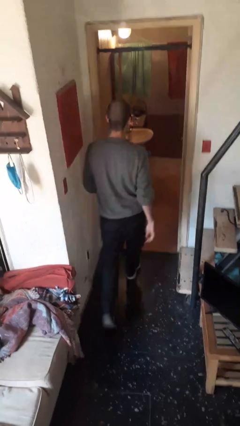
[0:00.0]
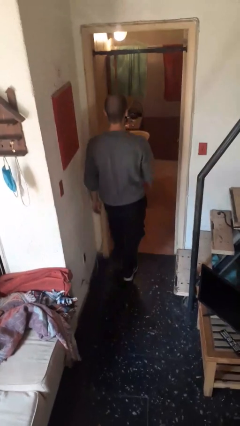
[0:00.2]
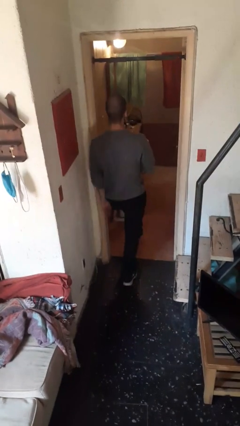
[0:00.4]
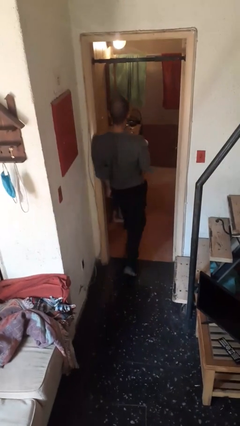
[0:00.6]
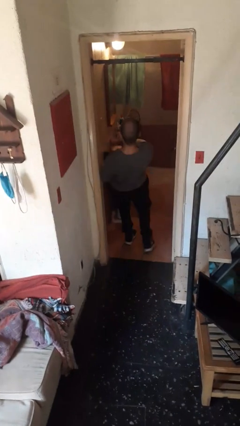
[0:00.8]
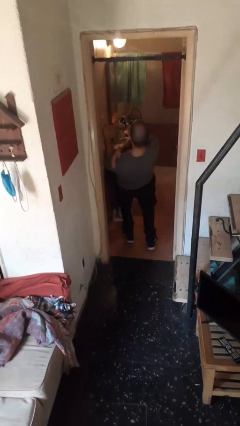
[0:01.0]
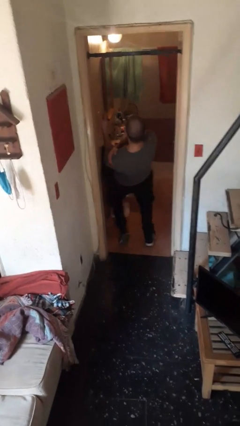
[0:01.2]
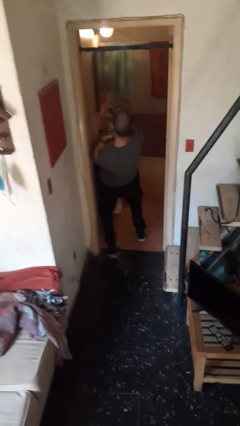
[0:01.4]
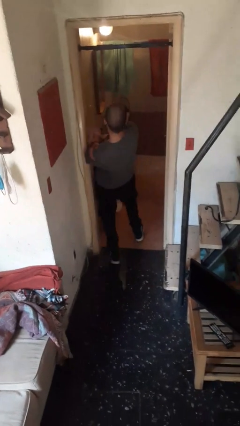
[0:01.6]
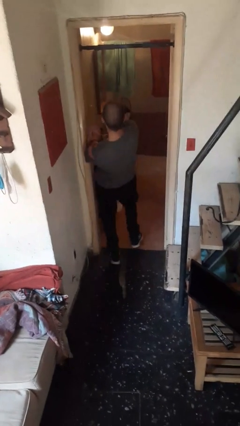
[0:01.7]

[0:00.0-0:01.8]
person bumps into wall

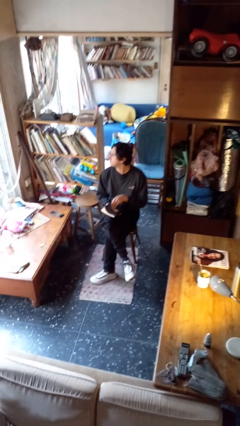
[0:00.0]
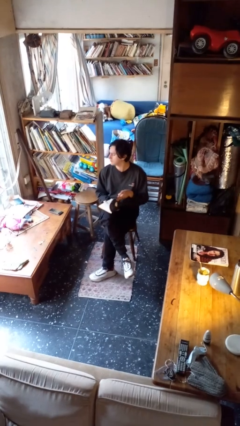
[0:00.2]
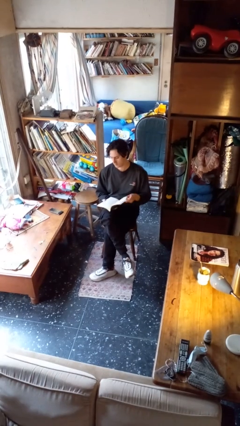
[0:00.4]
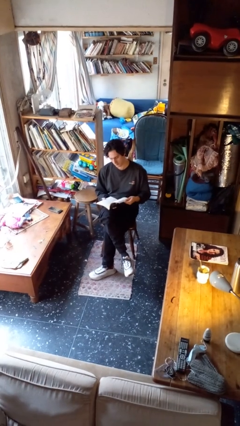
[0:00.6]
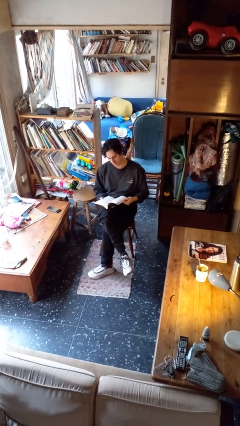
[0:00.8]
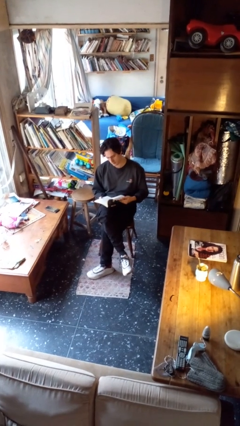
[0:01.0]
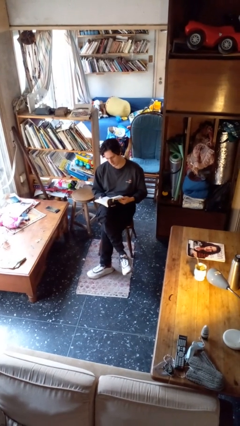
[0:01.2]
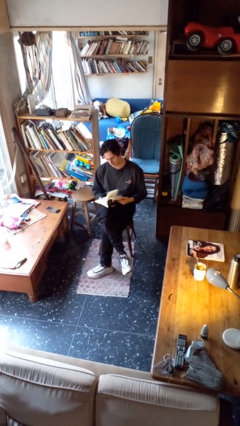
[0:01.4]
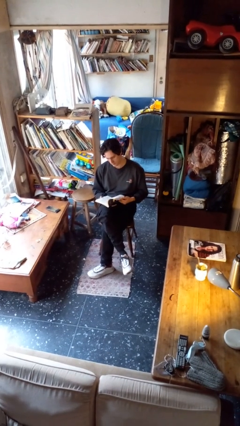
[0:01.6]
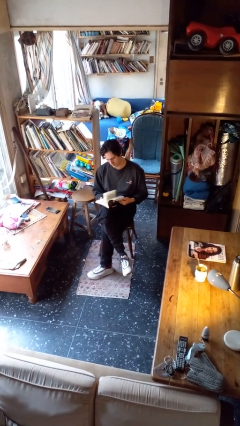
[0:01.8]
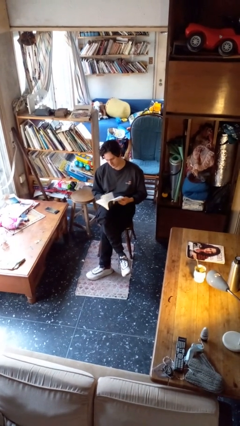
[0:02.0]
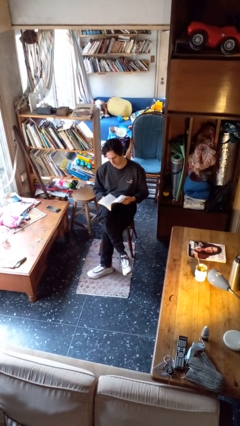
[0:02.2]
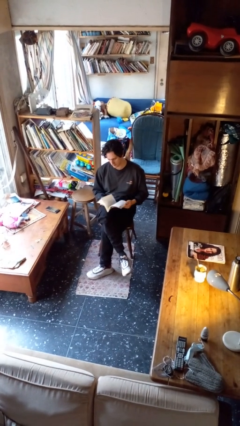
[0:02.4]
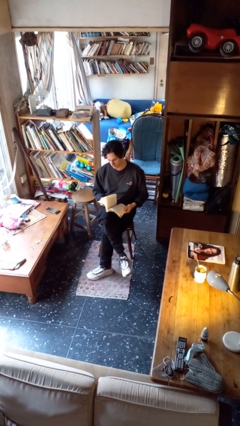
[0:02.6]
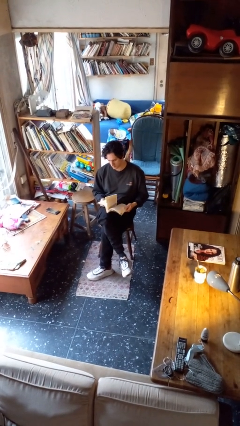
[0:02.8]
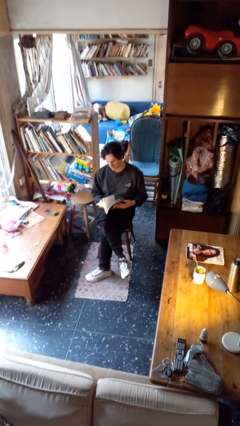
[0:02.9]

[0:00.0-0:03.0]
person reads book

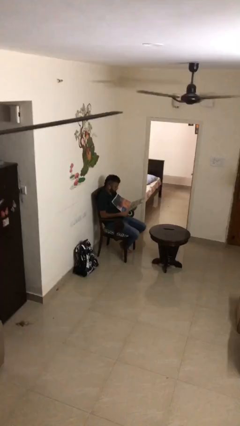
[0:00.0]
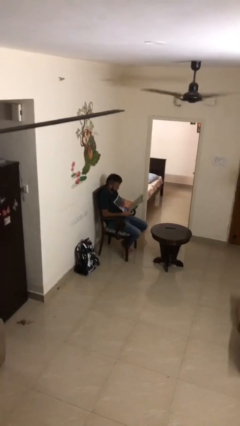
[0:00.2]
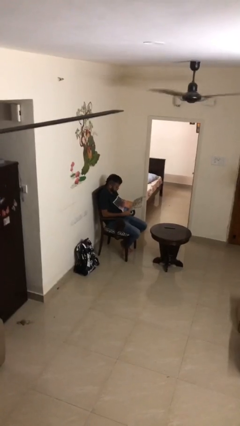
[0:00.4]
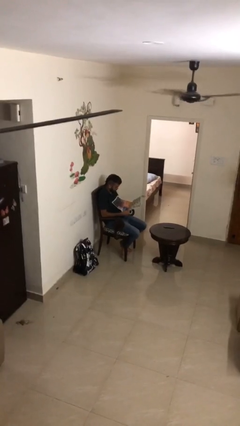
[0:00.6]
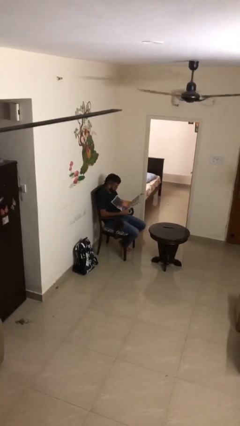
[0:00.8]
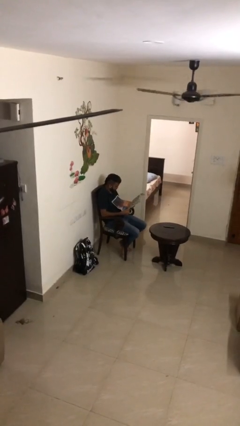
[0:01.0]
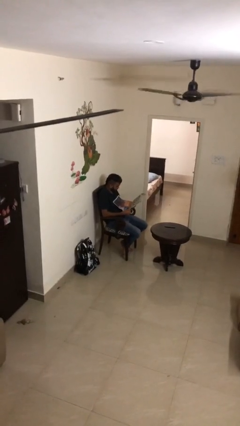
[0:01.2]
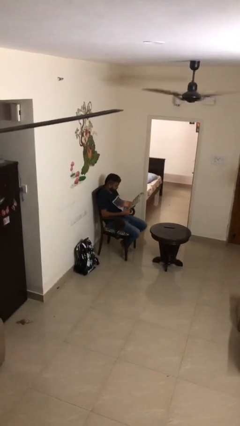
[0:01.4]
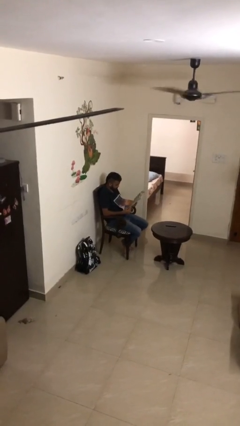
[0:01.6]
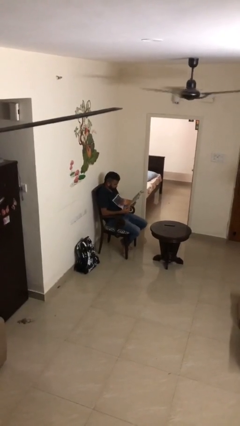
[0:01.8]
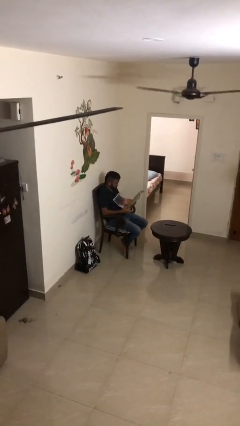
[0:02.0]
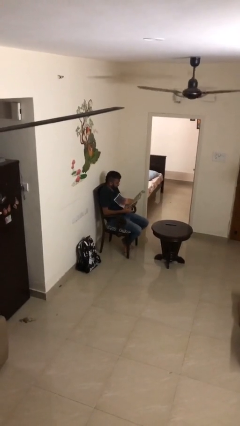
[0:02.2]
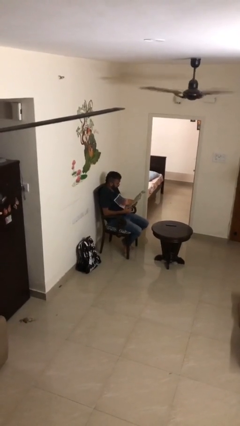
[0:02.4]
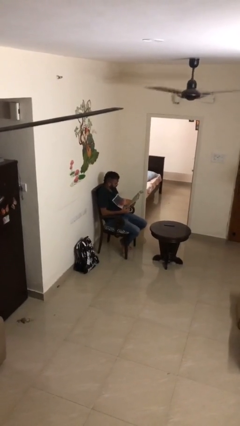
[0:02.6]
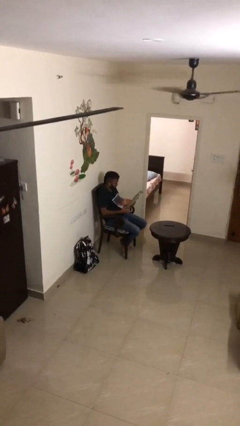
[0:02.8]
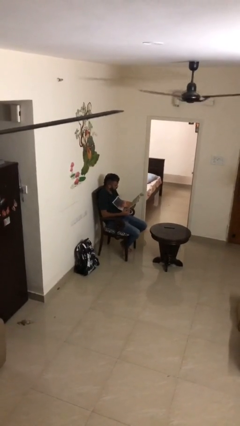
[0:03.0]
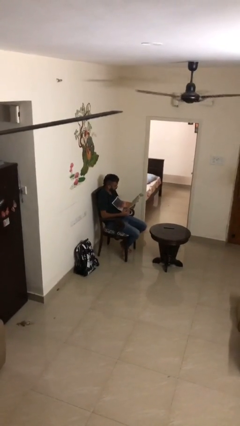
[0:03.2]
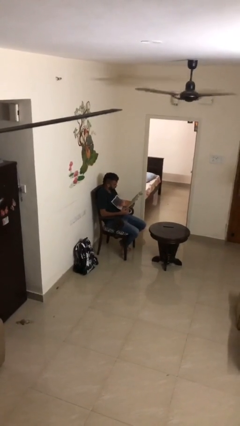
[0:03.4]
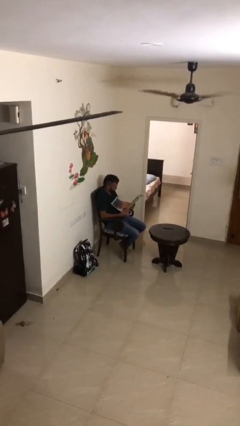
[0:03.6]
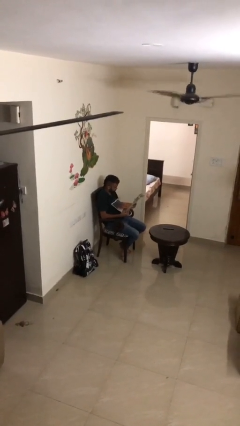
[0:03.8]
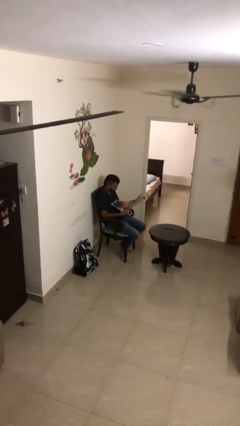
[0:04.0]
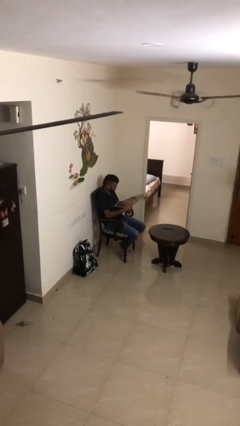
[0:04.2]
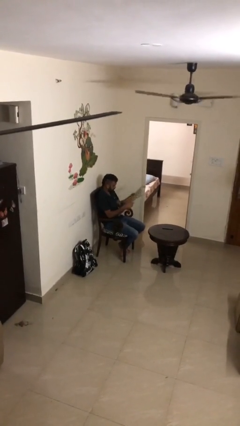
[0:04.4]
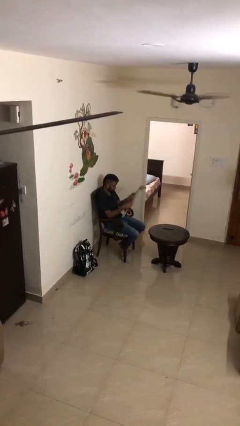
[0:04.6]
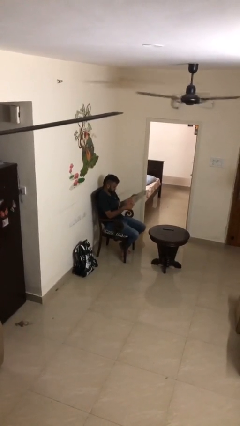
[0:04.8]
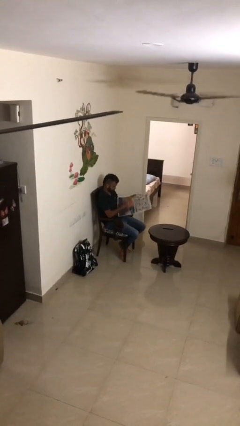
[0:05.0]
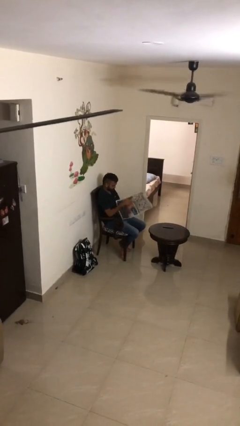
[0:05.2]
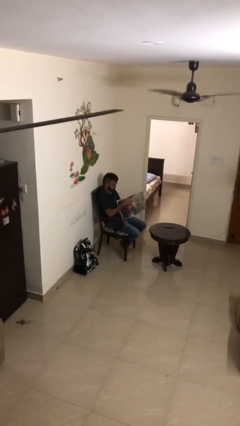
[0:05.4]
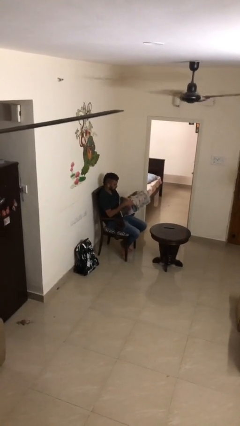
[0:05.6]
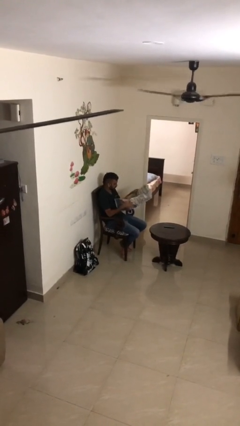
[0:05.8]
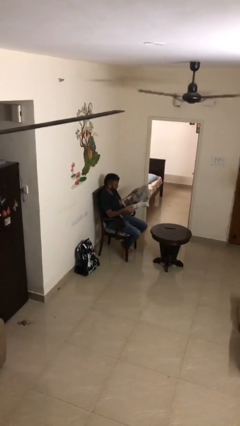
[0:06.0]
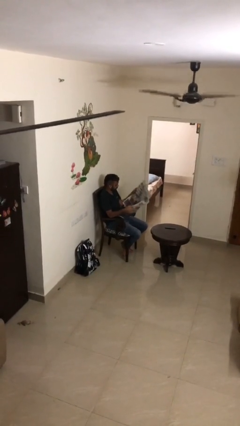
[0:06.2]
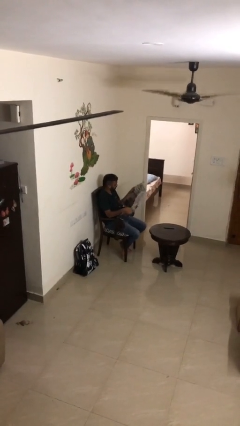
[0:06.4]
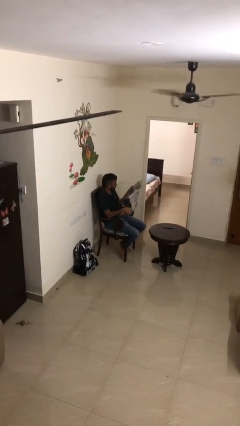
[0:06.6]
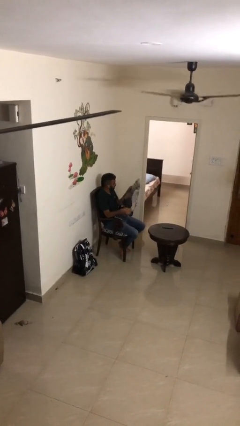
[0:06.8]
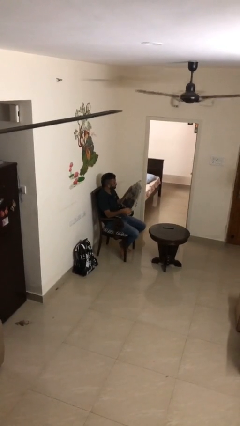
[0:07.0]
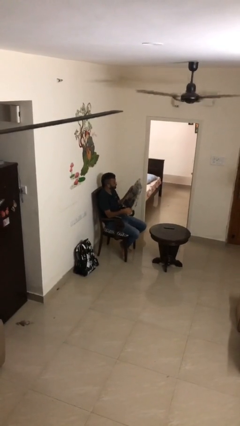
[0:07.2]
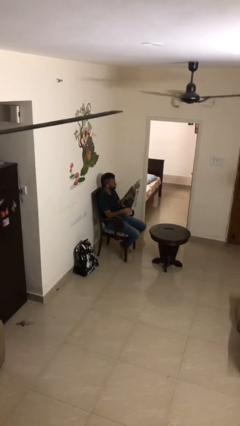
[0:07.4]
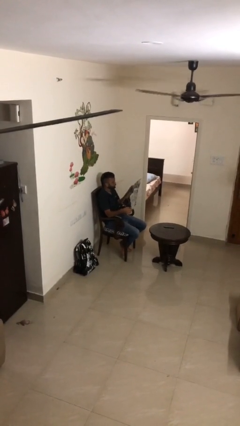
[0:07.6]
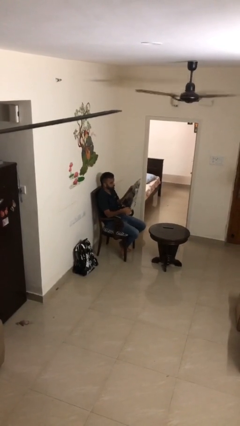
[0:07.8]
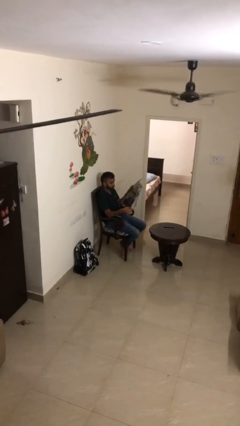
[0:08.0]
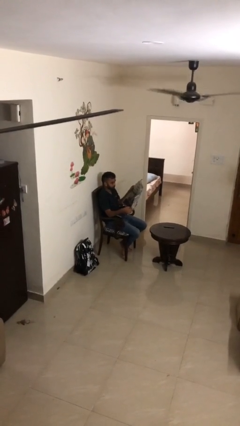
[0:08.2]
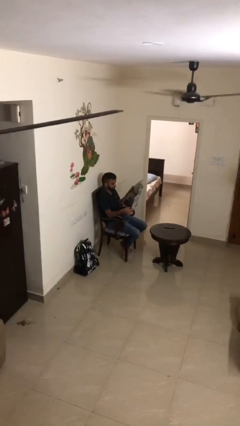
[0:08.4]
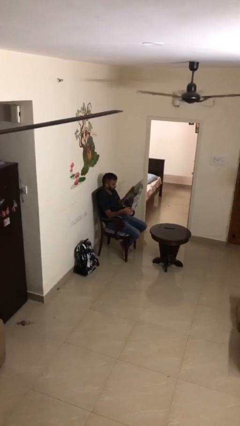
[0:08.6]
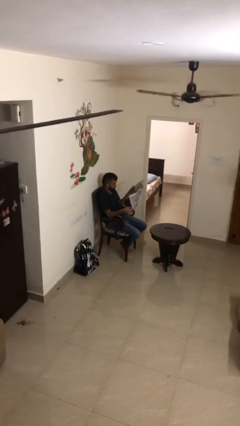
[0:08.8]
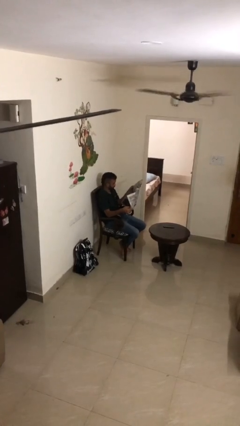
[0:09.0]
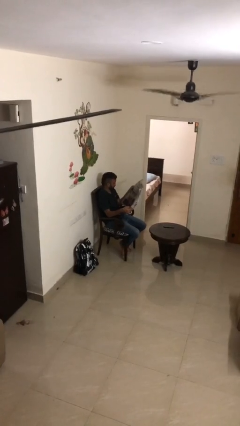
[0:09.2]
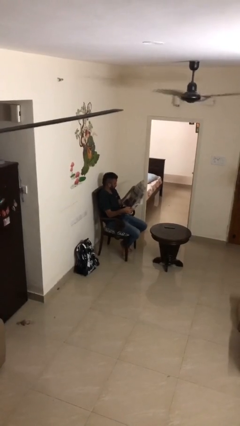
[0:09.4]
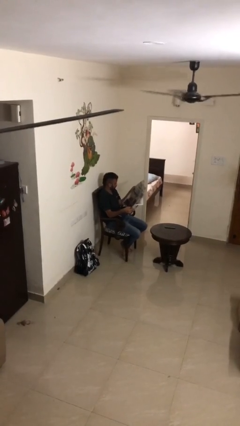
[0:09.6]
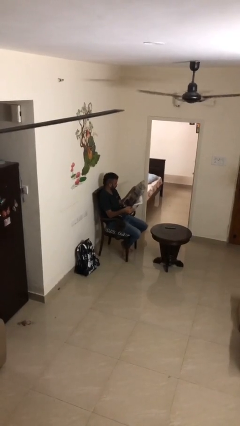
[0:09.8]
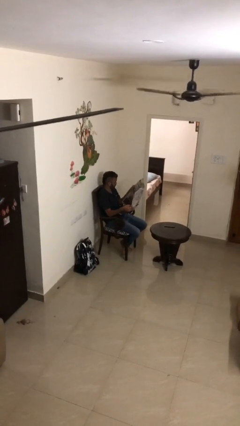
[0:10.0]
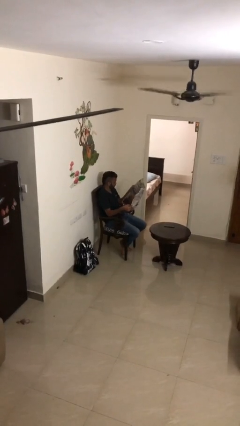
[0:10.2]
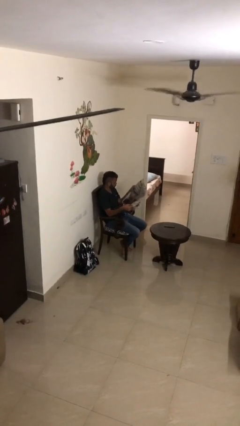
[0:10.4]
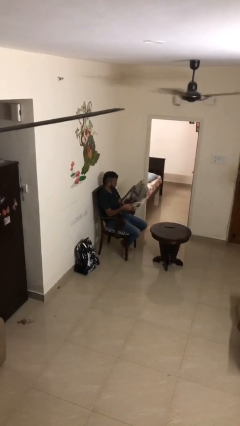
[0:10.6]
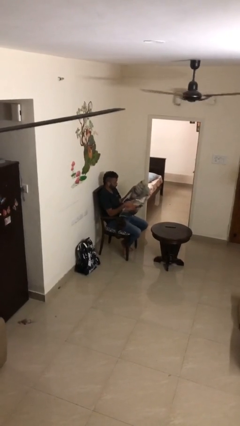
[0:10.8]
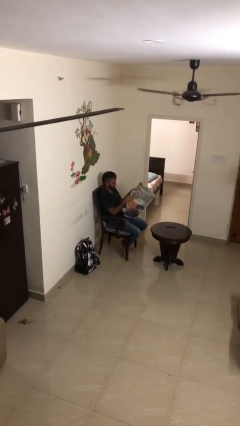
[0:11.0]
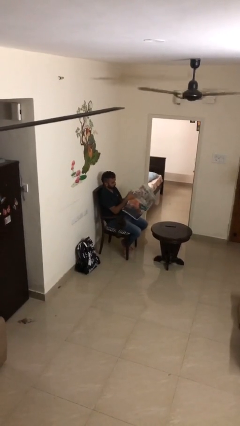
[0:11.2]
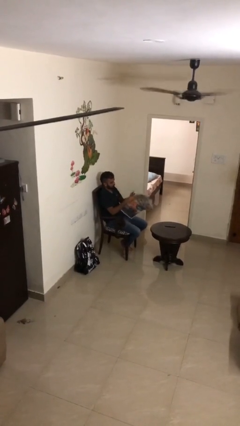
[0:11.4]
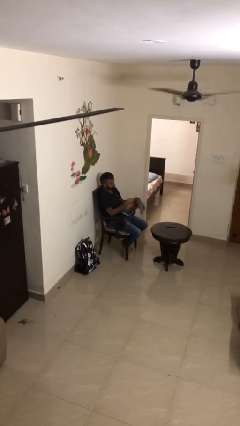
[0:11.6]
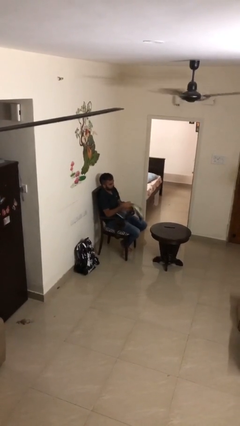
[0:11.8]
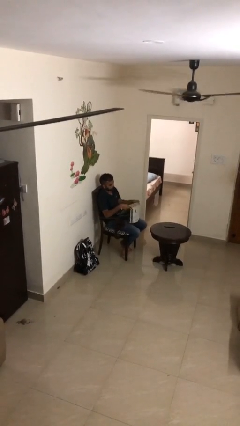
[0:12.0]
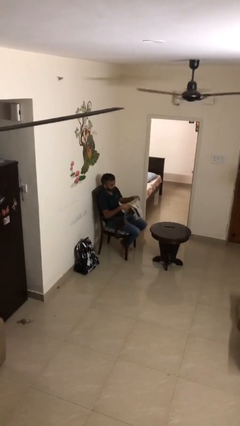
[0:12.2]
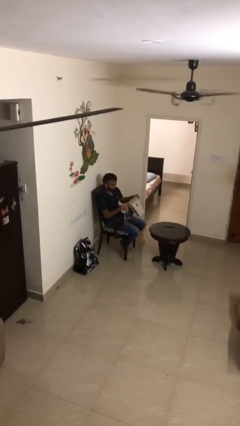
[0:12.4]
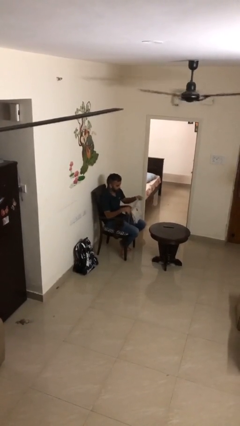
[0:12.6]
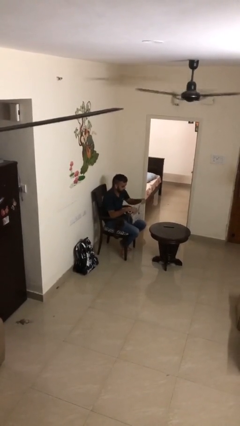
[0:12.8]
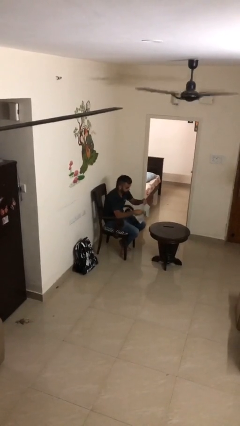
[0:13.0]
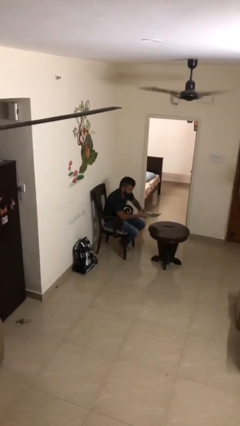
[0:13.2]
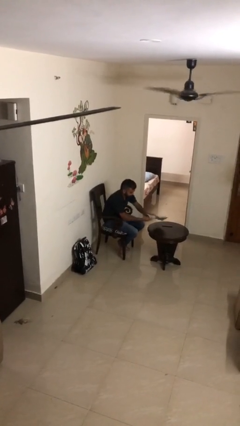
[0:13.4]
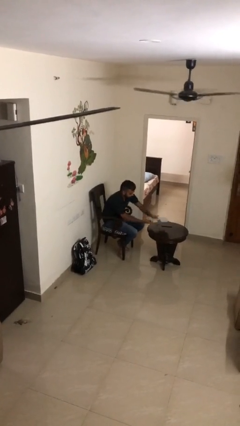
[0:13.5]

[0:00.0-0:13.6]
person reads document
